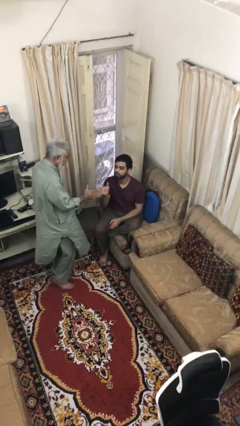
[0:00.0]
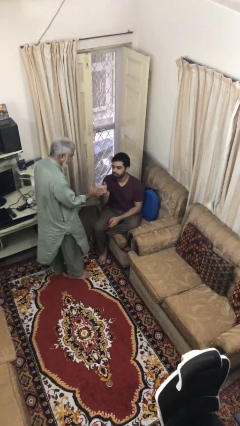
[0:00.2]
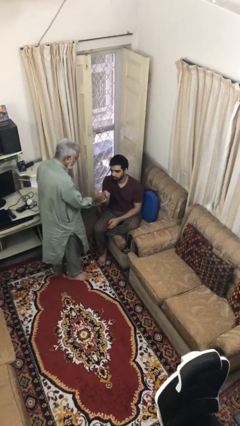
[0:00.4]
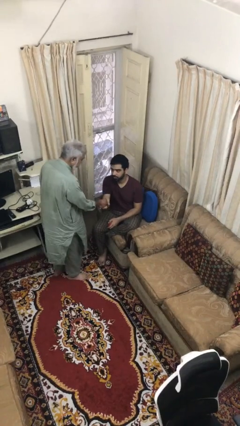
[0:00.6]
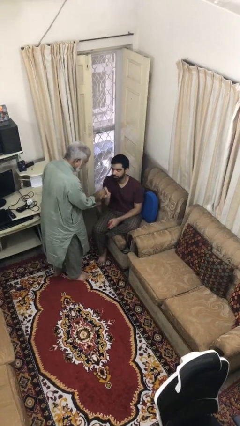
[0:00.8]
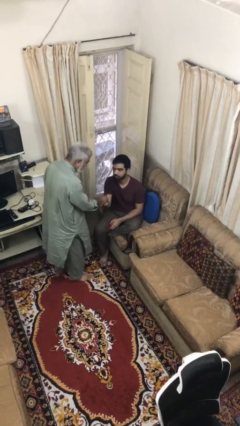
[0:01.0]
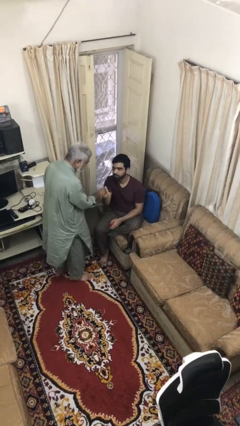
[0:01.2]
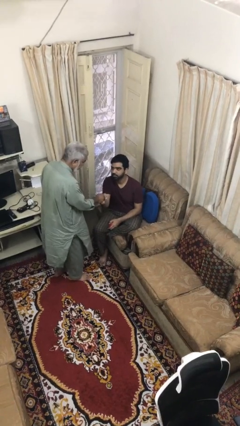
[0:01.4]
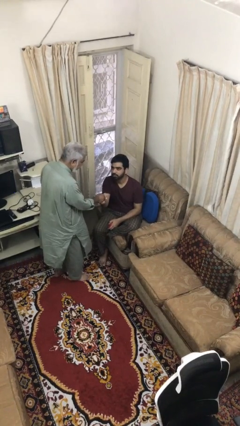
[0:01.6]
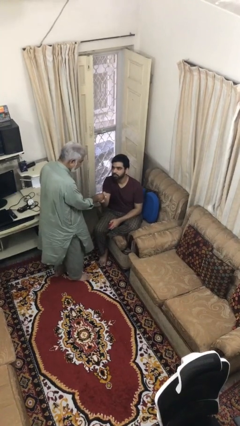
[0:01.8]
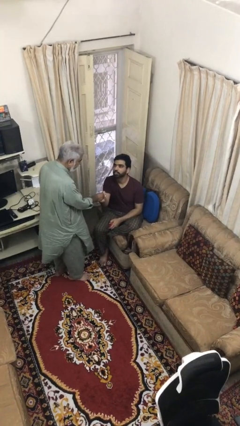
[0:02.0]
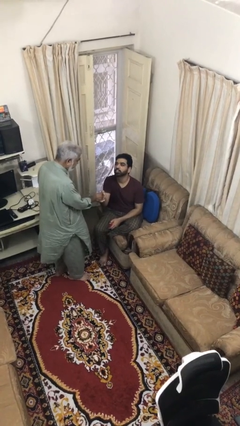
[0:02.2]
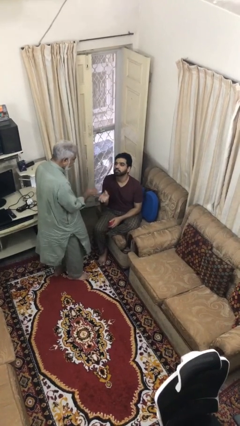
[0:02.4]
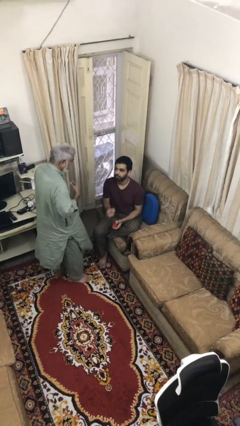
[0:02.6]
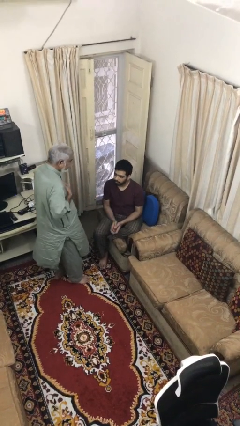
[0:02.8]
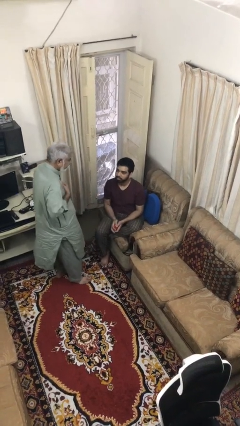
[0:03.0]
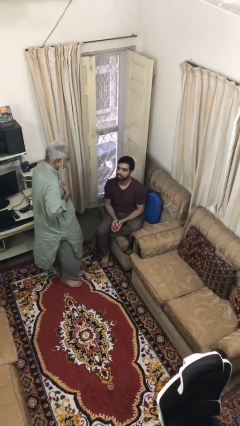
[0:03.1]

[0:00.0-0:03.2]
person shakes hand

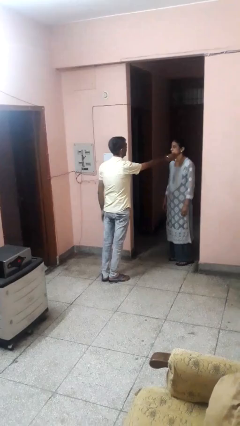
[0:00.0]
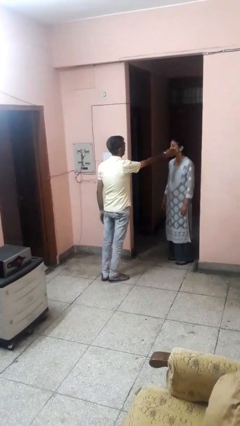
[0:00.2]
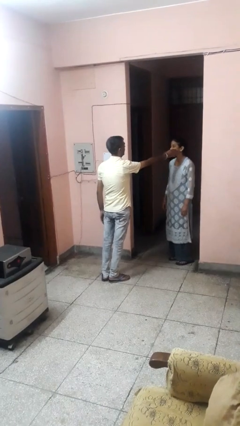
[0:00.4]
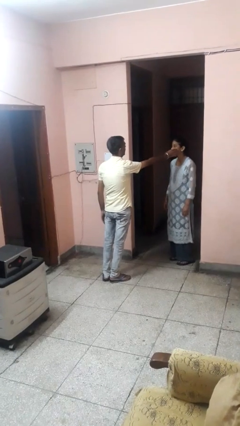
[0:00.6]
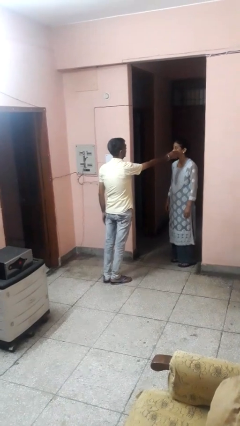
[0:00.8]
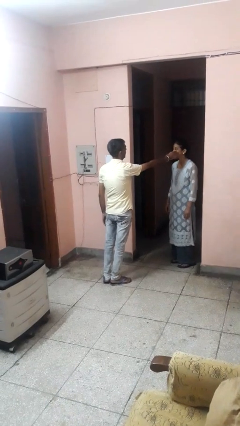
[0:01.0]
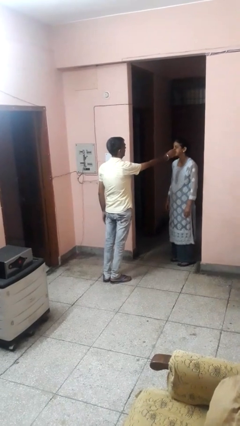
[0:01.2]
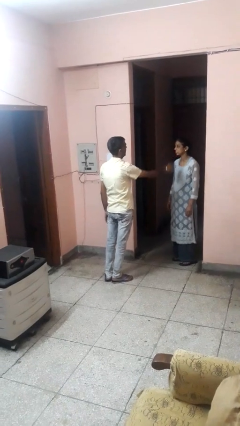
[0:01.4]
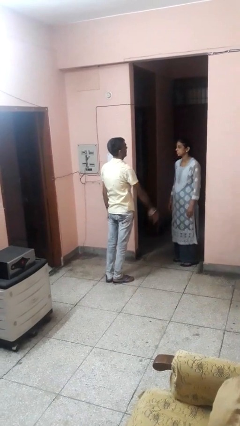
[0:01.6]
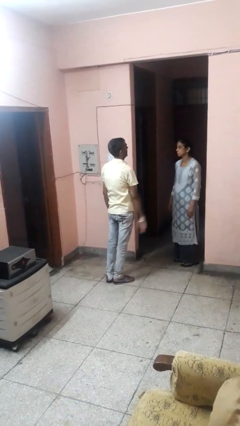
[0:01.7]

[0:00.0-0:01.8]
person touches face of person

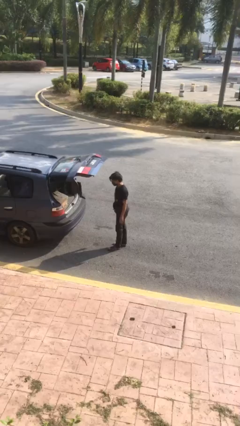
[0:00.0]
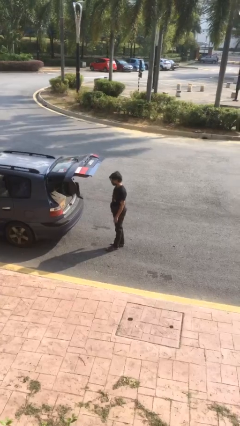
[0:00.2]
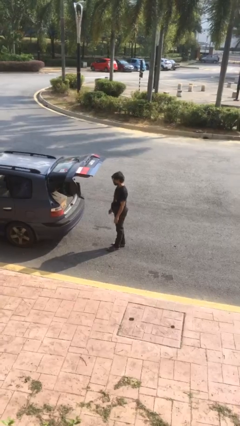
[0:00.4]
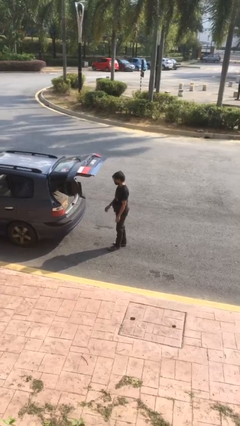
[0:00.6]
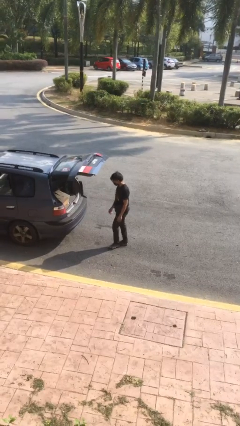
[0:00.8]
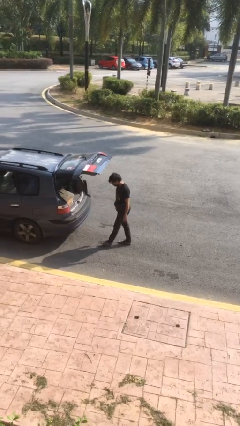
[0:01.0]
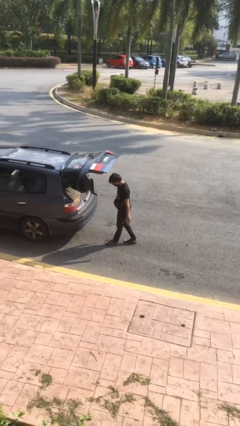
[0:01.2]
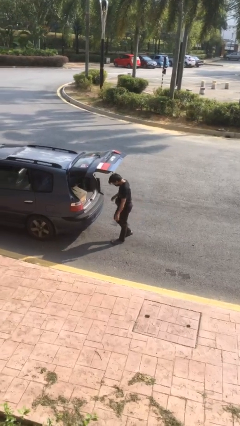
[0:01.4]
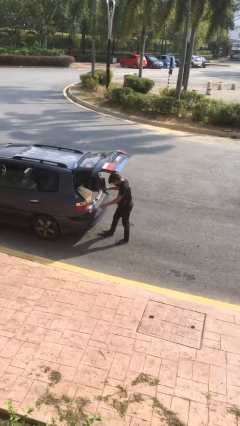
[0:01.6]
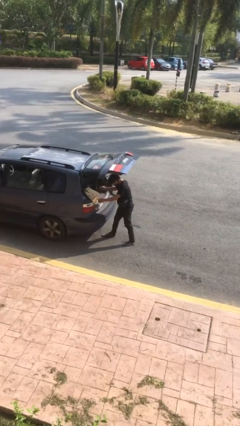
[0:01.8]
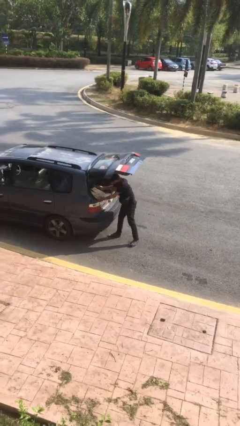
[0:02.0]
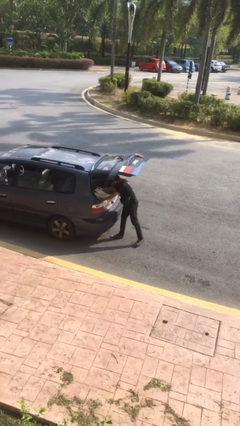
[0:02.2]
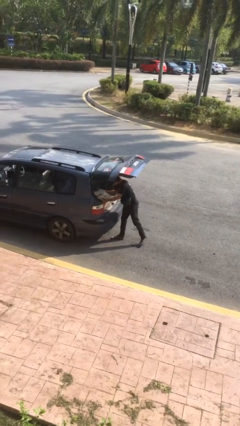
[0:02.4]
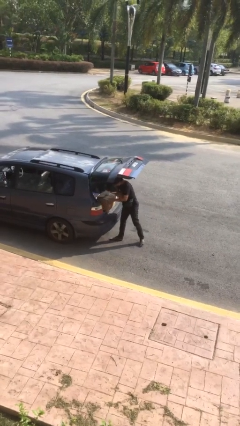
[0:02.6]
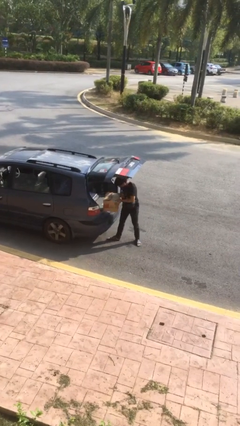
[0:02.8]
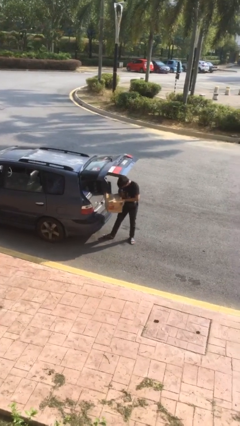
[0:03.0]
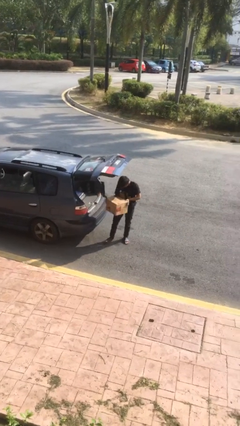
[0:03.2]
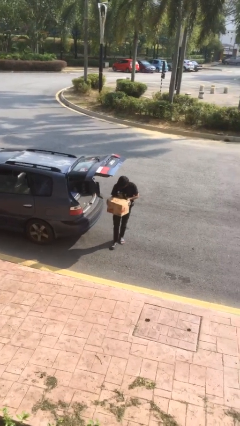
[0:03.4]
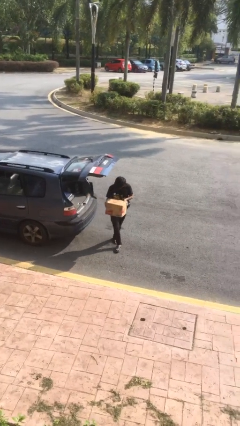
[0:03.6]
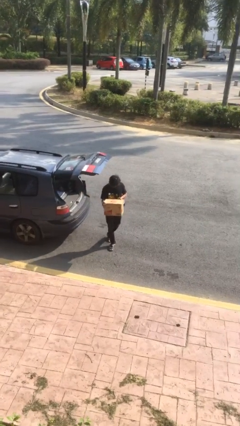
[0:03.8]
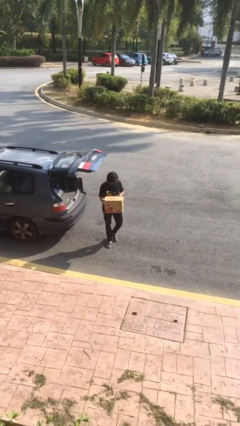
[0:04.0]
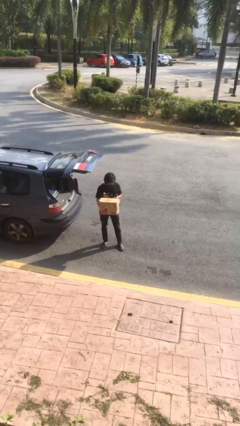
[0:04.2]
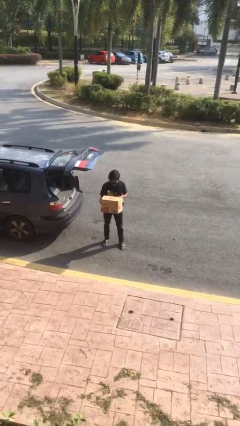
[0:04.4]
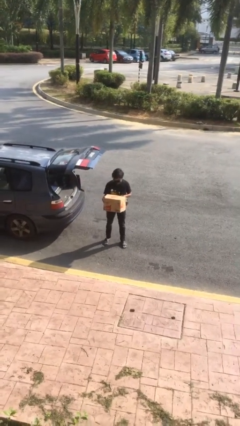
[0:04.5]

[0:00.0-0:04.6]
person unloads car

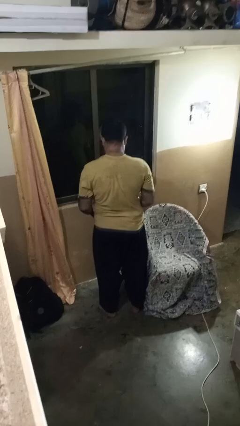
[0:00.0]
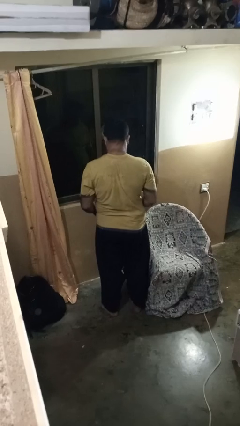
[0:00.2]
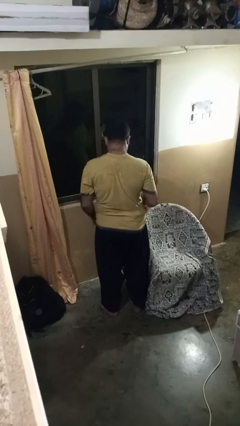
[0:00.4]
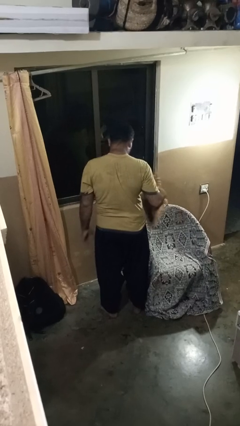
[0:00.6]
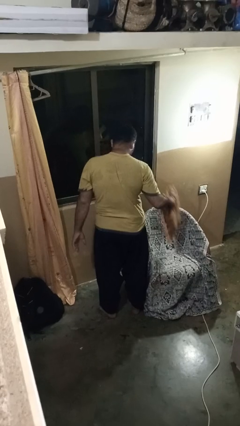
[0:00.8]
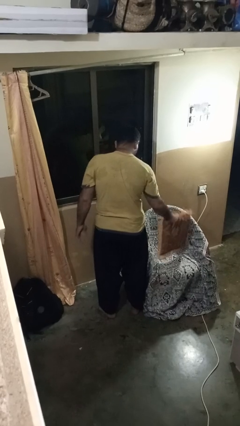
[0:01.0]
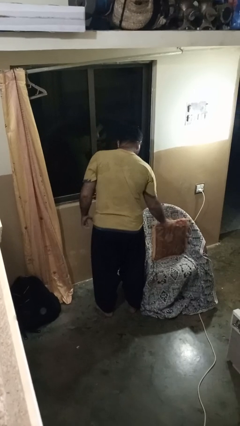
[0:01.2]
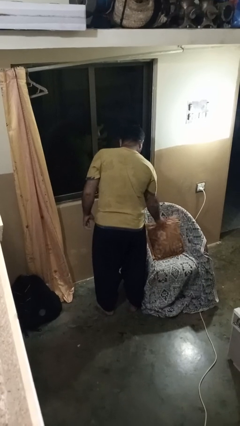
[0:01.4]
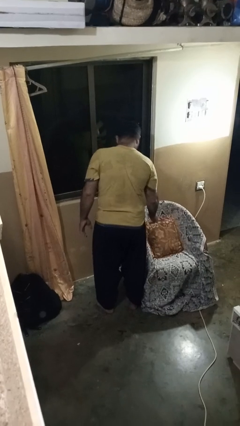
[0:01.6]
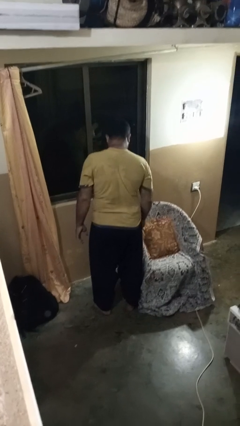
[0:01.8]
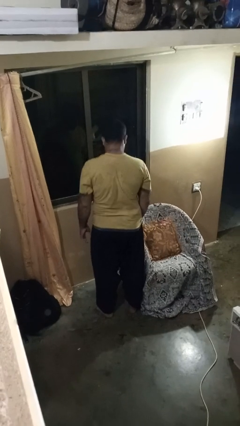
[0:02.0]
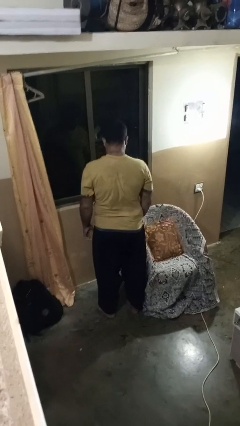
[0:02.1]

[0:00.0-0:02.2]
person puts down object on couch

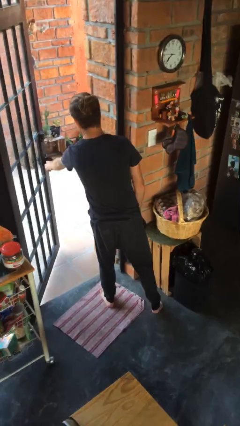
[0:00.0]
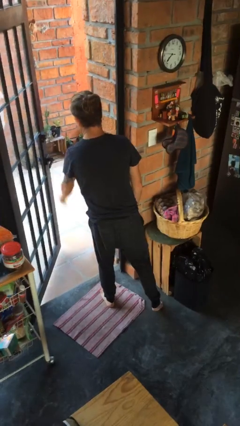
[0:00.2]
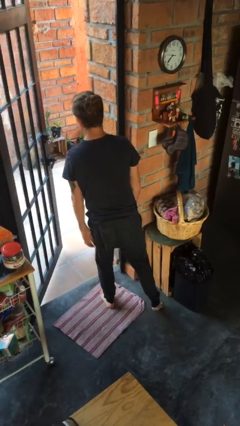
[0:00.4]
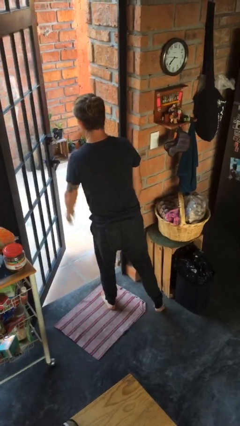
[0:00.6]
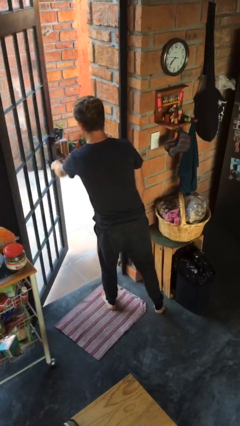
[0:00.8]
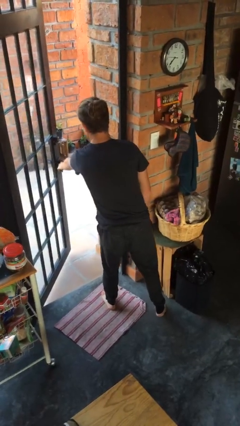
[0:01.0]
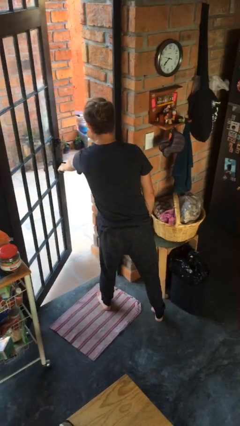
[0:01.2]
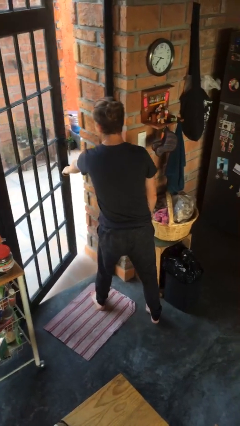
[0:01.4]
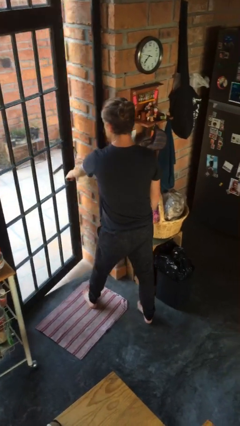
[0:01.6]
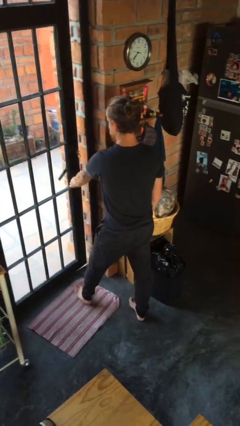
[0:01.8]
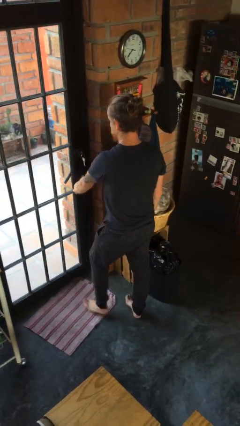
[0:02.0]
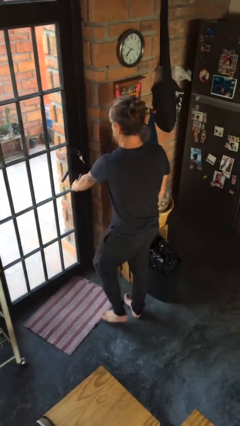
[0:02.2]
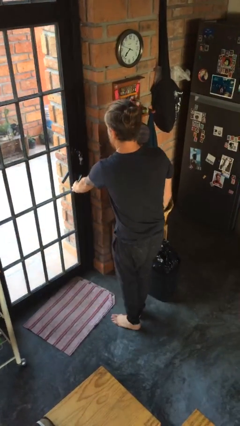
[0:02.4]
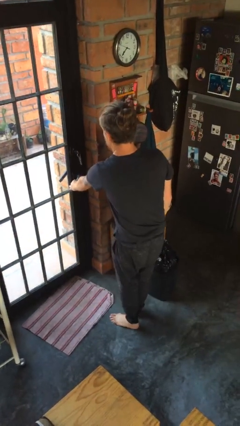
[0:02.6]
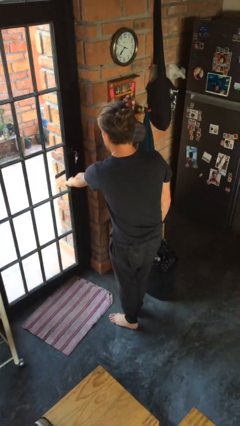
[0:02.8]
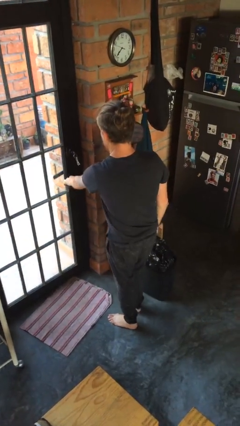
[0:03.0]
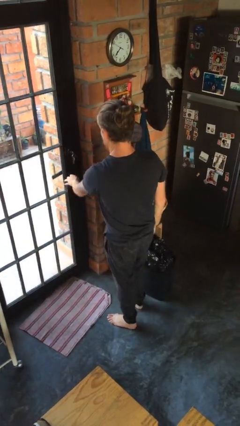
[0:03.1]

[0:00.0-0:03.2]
person closes facility door

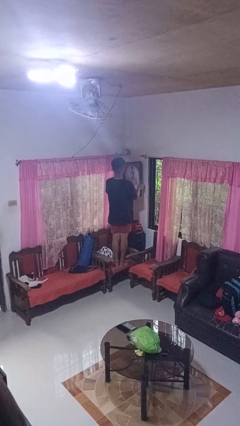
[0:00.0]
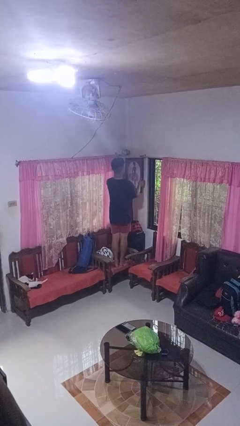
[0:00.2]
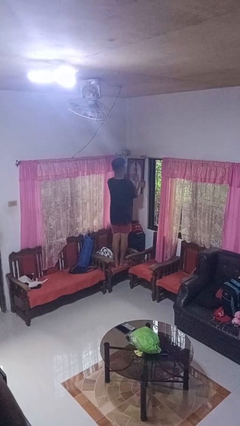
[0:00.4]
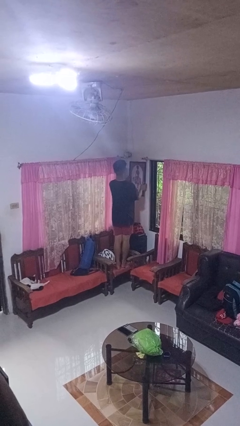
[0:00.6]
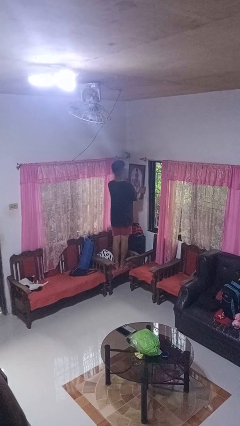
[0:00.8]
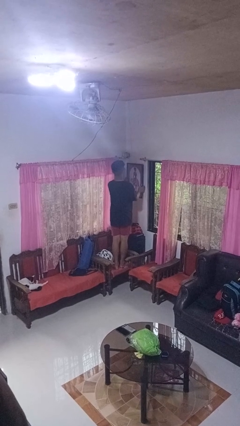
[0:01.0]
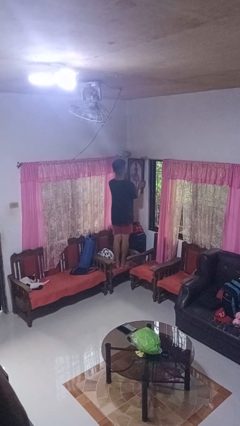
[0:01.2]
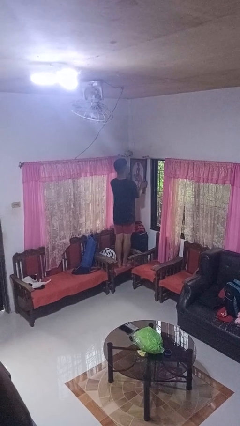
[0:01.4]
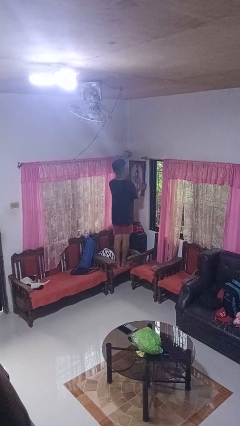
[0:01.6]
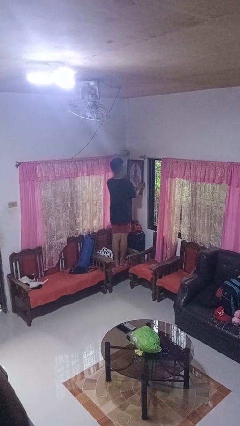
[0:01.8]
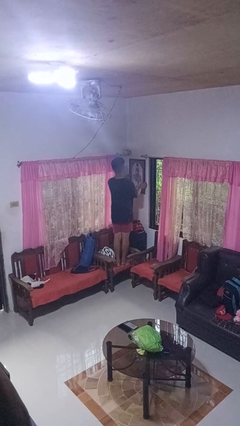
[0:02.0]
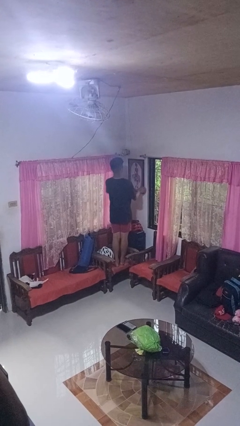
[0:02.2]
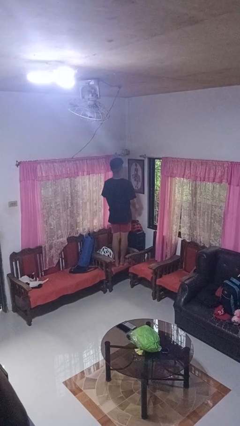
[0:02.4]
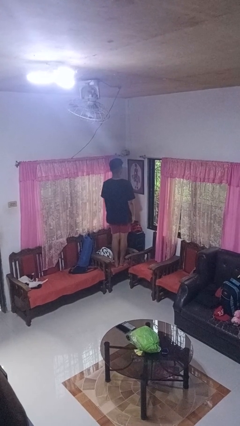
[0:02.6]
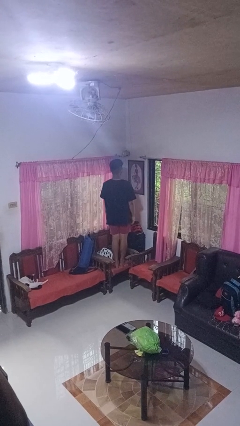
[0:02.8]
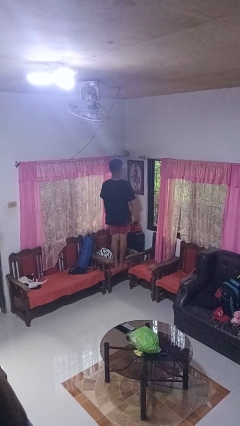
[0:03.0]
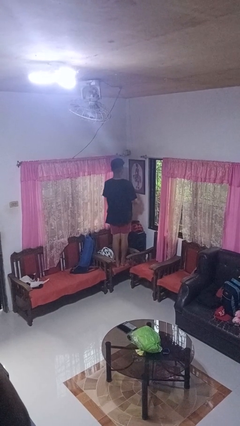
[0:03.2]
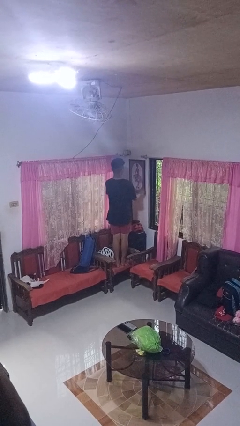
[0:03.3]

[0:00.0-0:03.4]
person puts up picture frame
